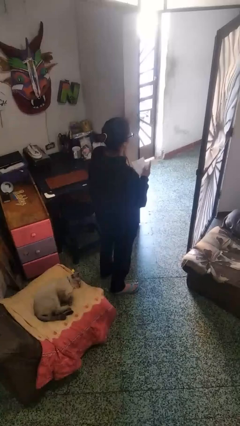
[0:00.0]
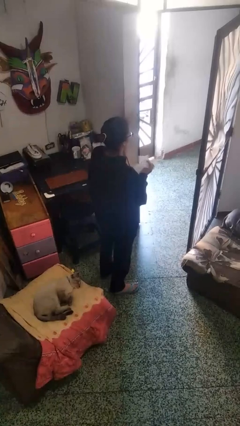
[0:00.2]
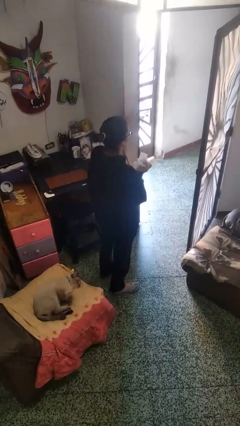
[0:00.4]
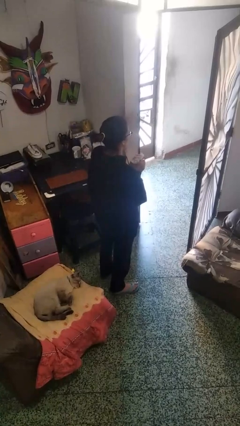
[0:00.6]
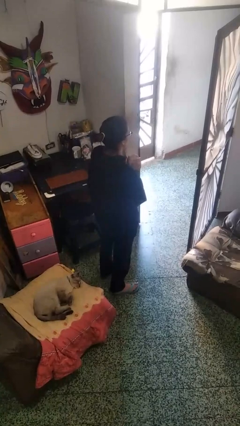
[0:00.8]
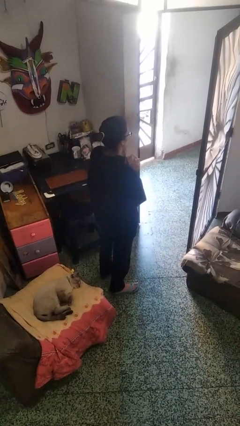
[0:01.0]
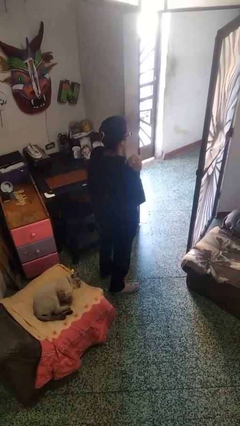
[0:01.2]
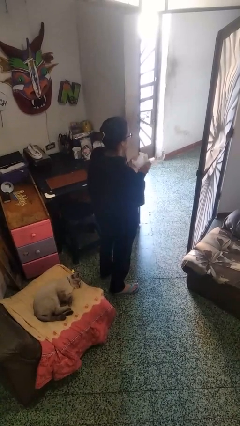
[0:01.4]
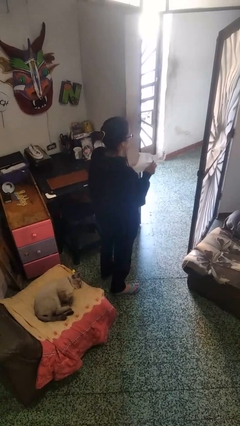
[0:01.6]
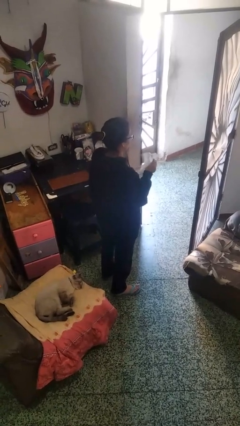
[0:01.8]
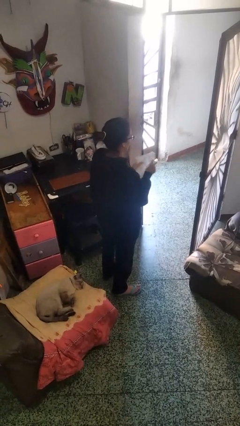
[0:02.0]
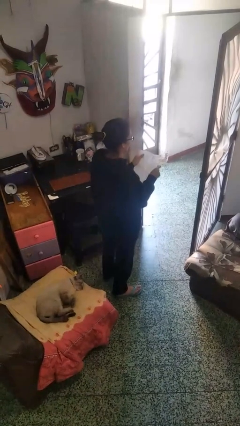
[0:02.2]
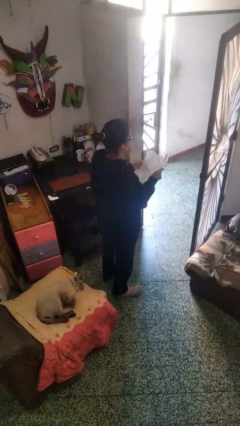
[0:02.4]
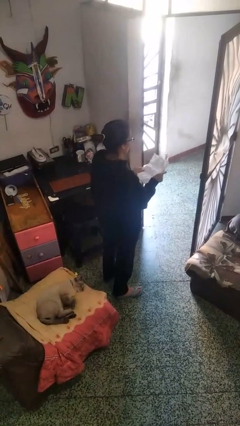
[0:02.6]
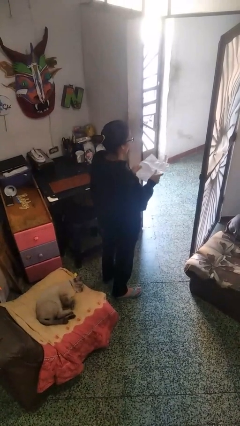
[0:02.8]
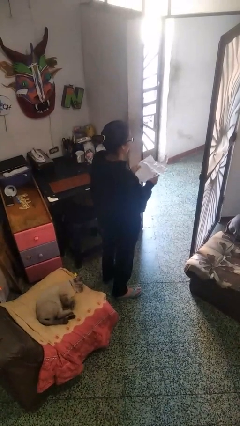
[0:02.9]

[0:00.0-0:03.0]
person crumples paper

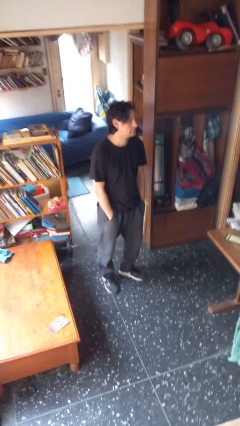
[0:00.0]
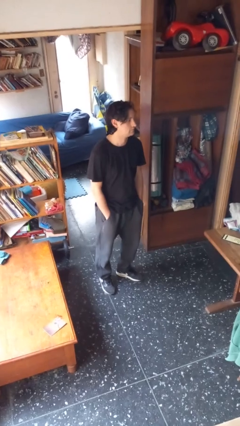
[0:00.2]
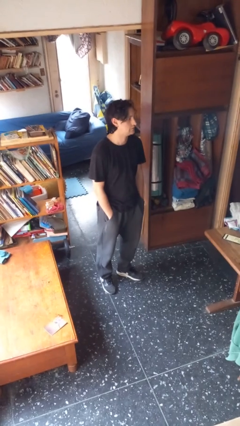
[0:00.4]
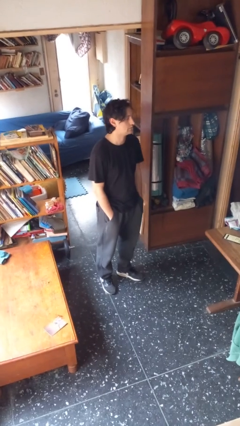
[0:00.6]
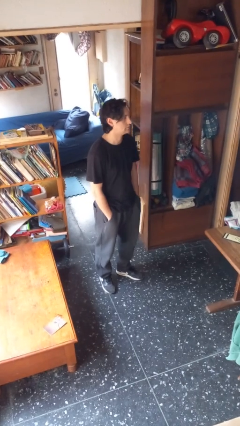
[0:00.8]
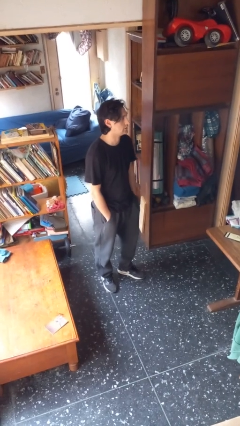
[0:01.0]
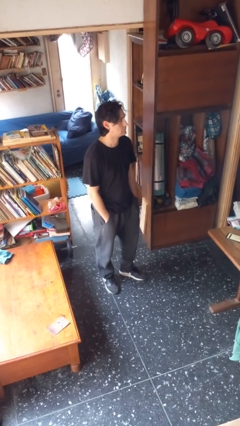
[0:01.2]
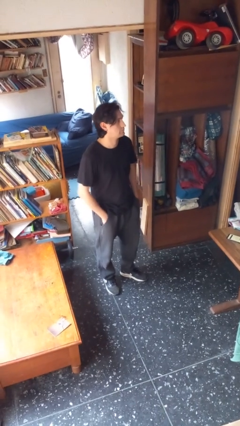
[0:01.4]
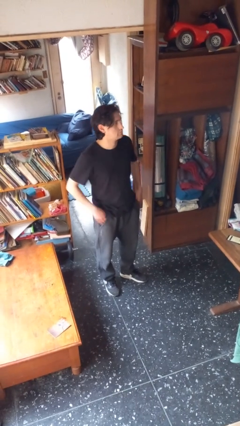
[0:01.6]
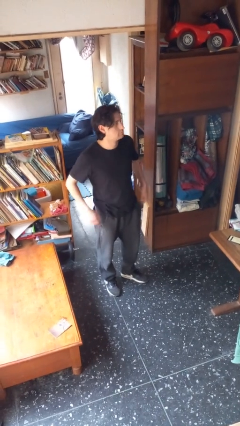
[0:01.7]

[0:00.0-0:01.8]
person puts hands in back pockets

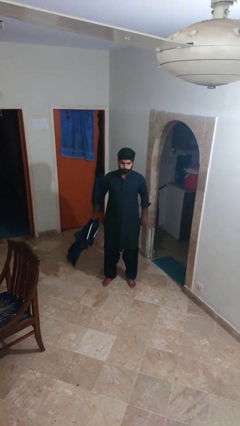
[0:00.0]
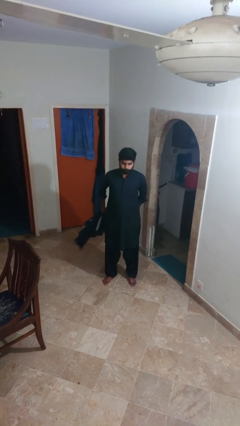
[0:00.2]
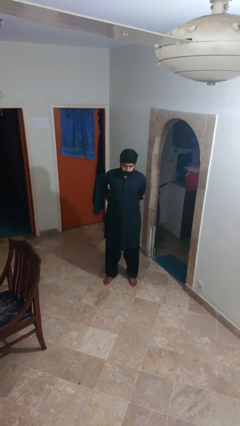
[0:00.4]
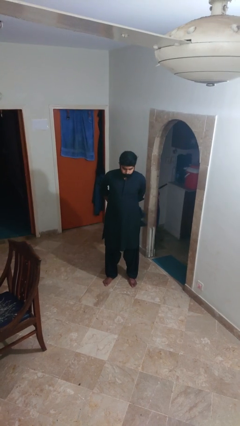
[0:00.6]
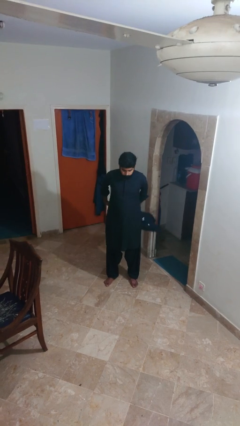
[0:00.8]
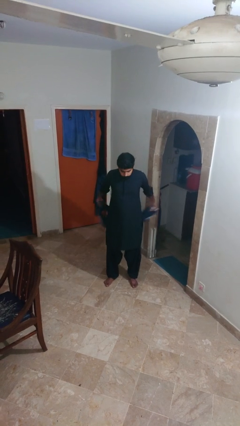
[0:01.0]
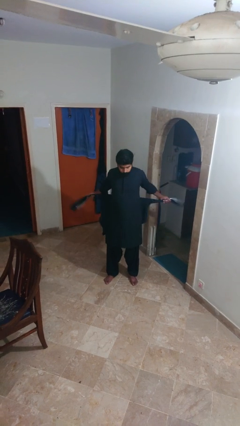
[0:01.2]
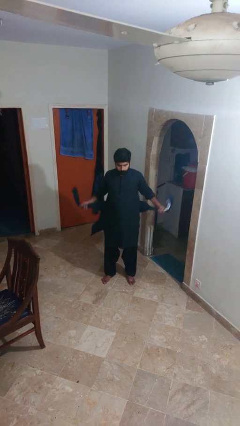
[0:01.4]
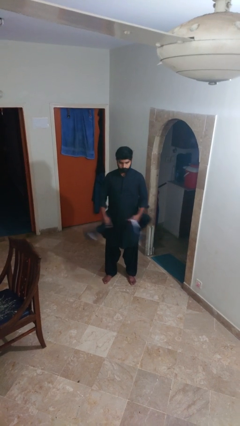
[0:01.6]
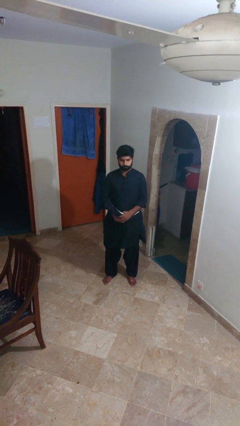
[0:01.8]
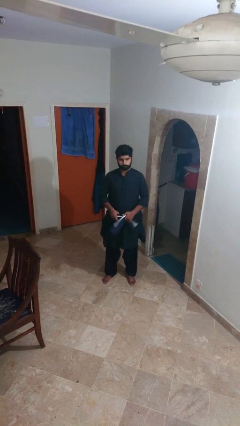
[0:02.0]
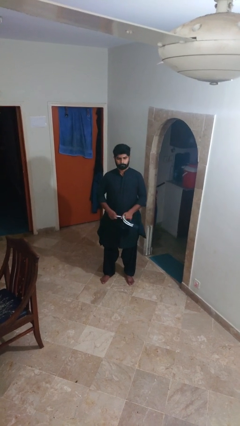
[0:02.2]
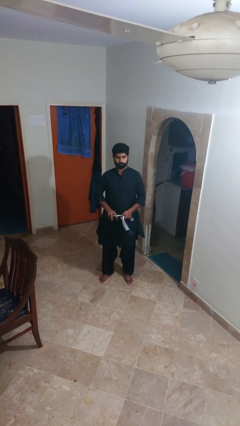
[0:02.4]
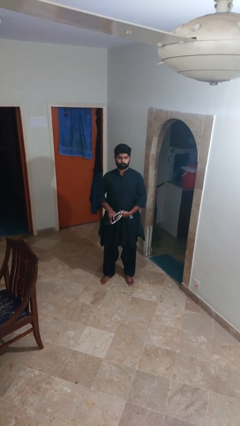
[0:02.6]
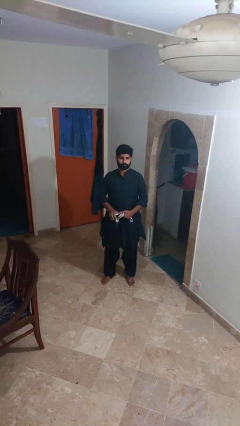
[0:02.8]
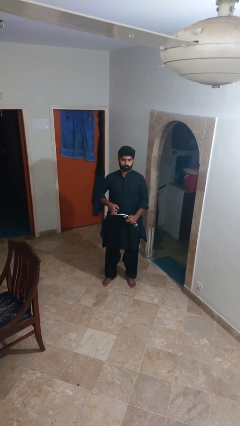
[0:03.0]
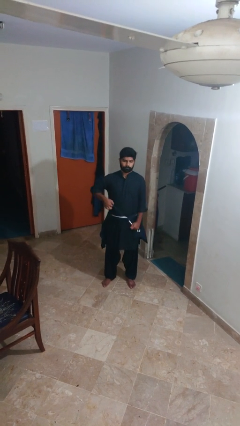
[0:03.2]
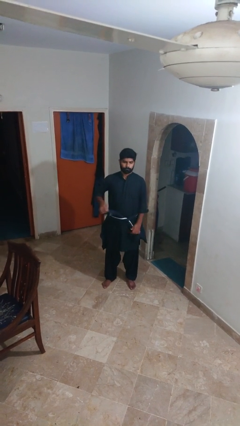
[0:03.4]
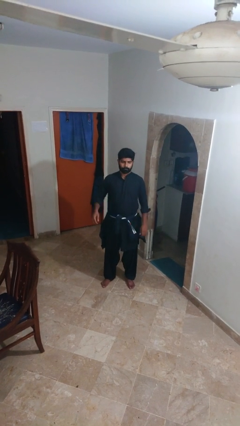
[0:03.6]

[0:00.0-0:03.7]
person ties jacket around waist

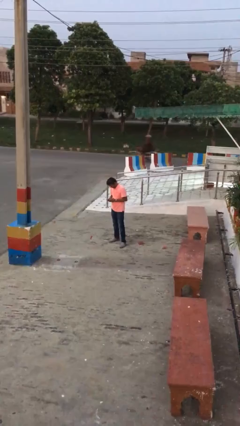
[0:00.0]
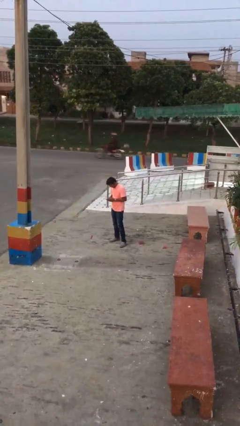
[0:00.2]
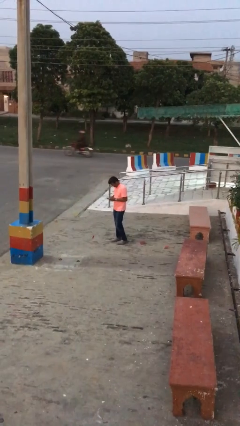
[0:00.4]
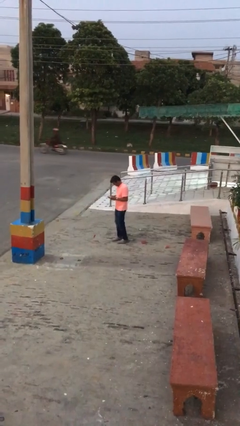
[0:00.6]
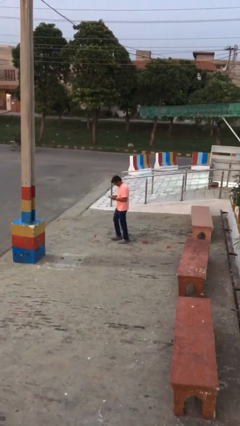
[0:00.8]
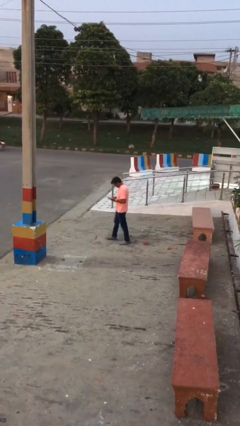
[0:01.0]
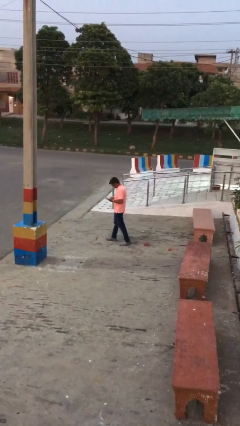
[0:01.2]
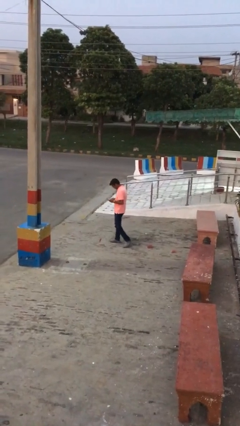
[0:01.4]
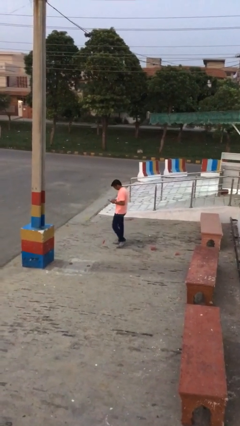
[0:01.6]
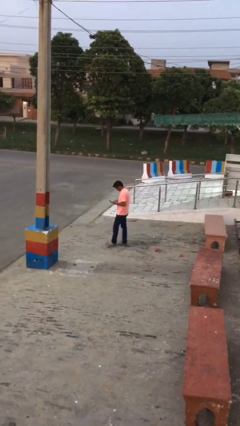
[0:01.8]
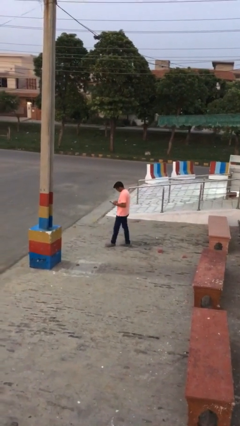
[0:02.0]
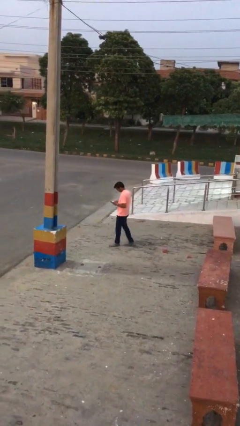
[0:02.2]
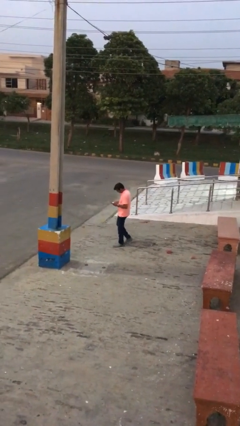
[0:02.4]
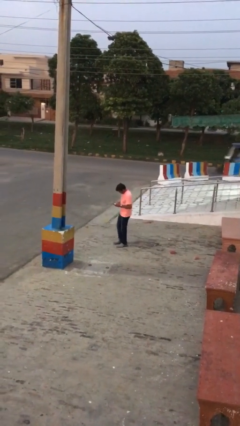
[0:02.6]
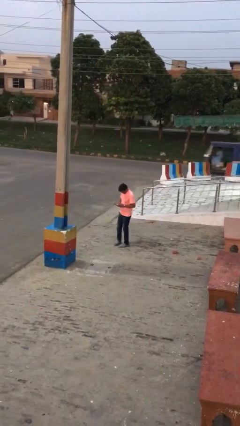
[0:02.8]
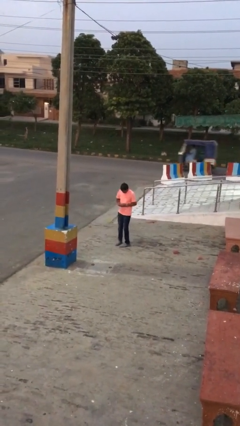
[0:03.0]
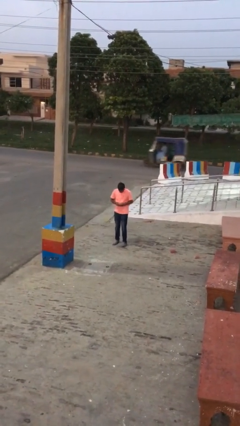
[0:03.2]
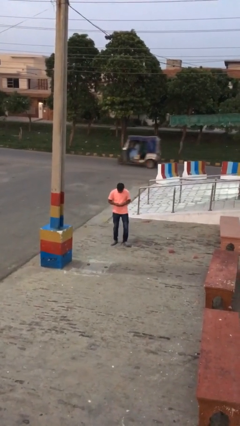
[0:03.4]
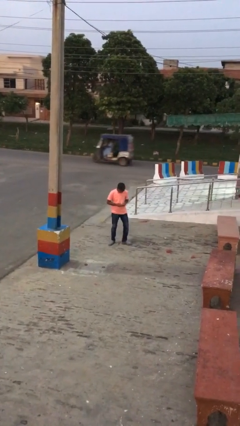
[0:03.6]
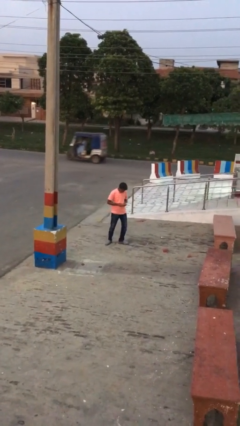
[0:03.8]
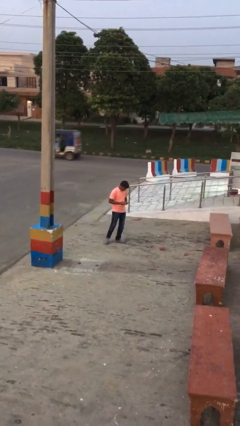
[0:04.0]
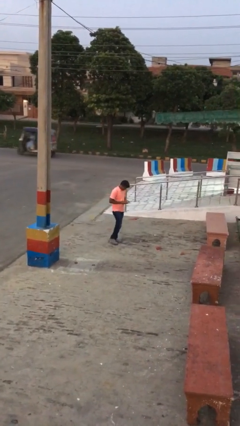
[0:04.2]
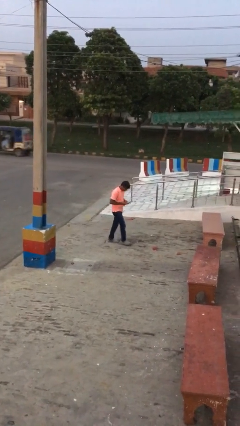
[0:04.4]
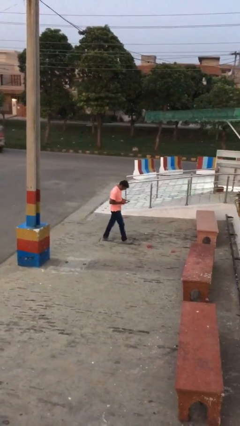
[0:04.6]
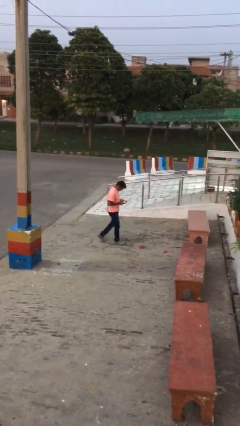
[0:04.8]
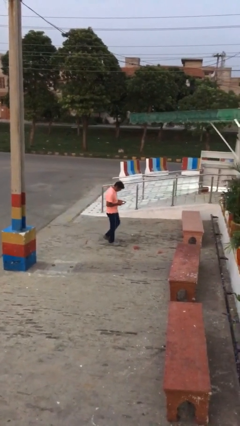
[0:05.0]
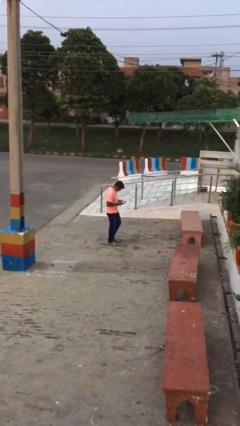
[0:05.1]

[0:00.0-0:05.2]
person texts on phone

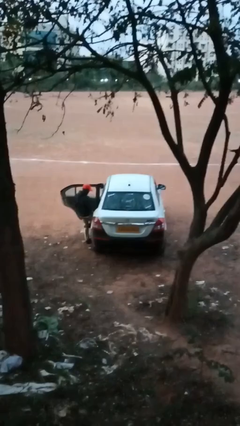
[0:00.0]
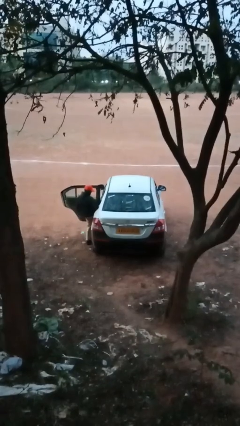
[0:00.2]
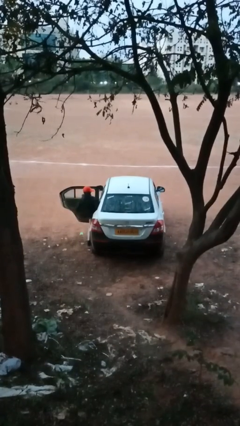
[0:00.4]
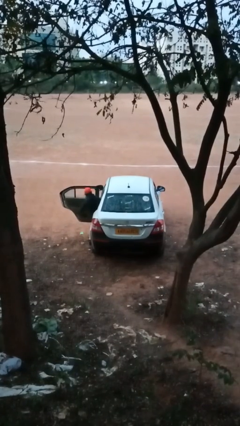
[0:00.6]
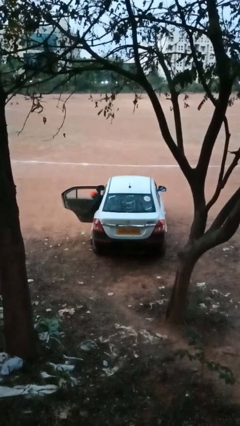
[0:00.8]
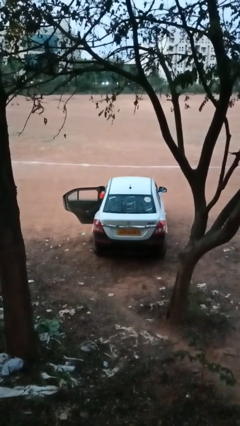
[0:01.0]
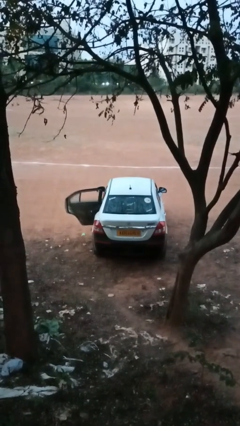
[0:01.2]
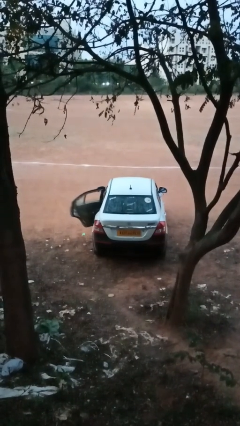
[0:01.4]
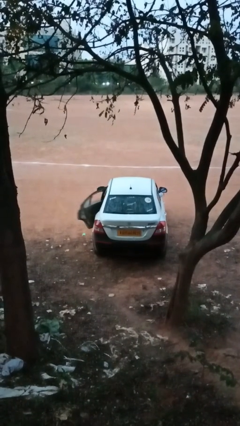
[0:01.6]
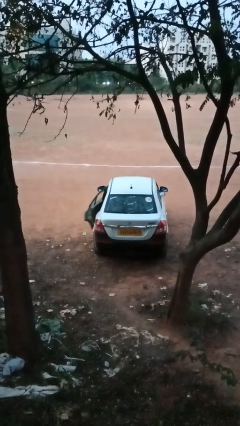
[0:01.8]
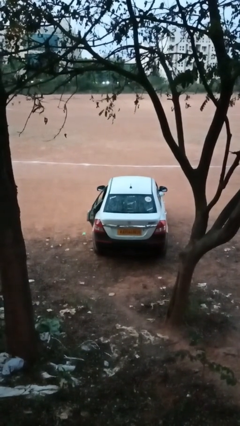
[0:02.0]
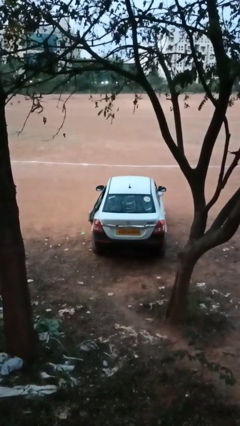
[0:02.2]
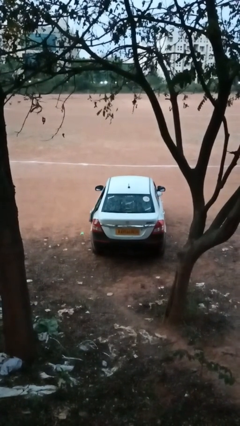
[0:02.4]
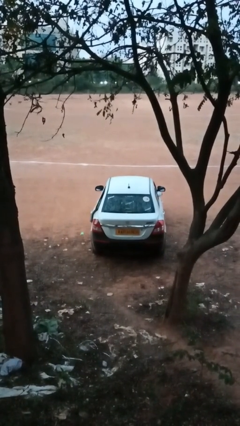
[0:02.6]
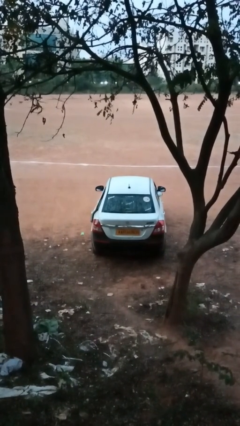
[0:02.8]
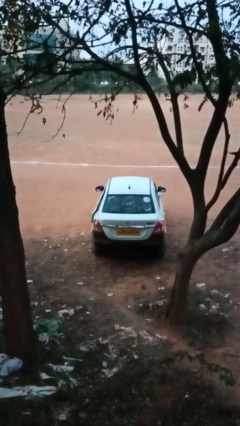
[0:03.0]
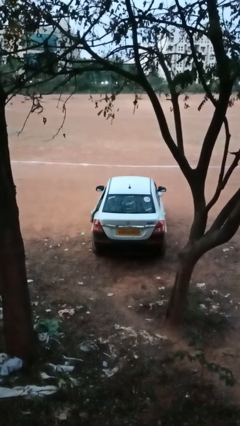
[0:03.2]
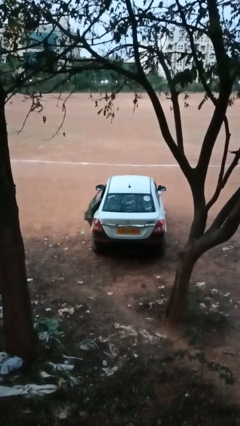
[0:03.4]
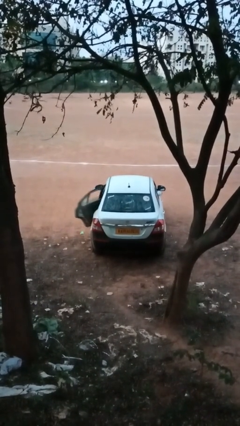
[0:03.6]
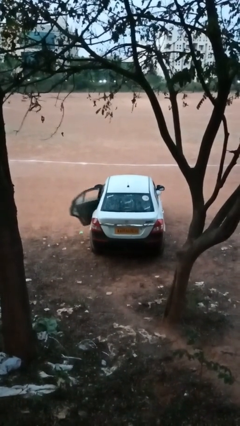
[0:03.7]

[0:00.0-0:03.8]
car picks up person

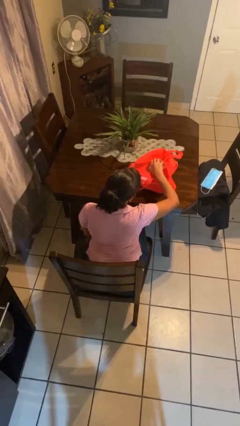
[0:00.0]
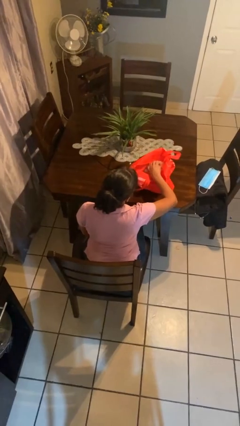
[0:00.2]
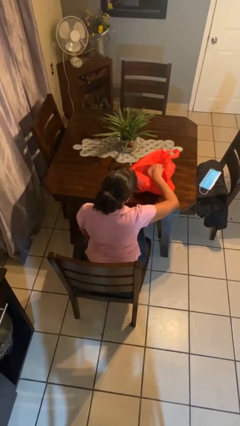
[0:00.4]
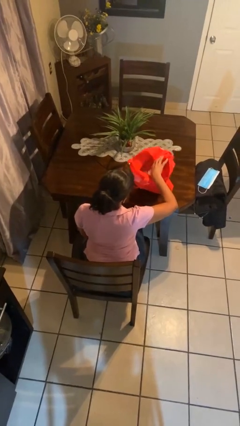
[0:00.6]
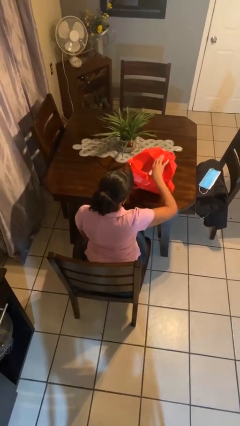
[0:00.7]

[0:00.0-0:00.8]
person puts object into bag
